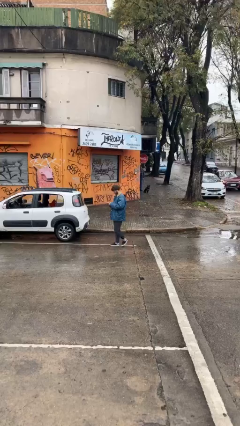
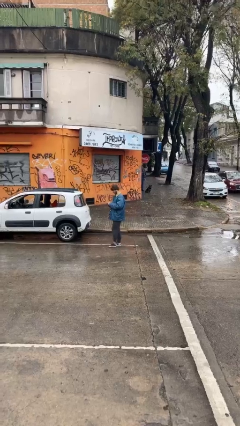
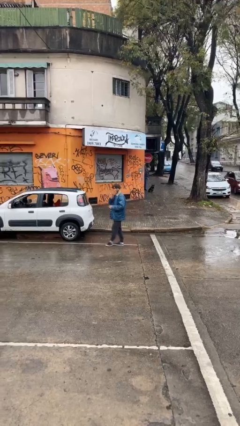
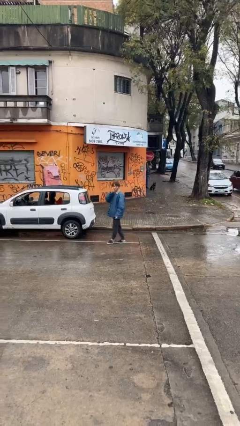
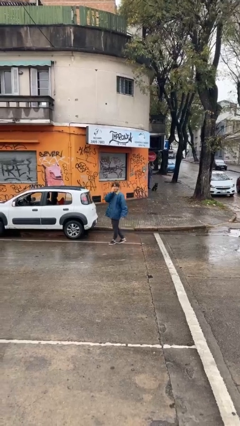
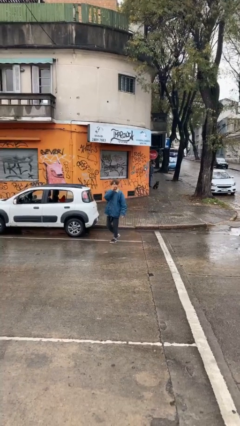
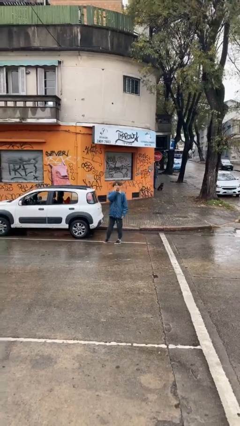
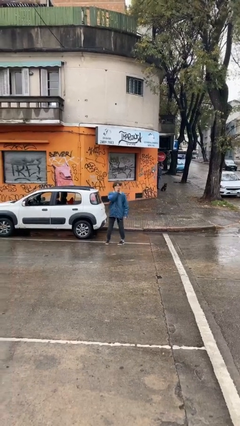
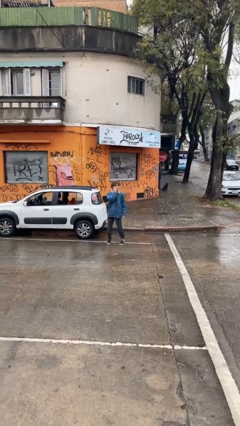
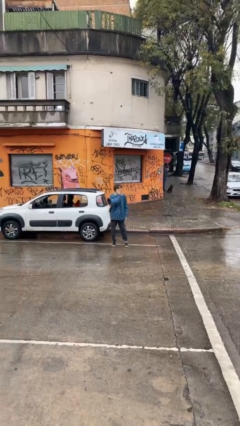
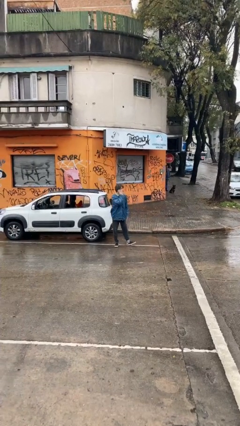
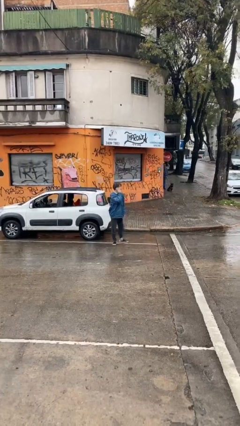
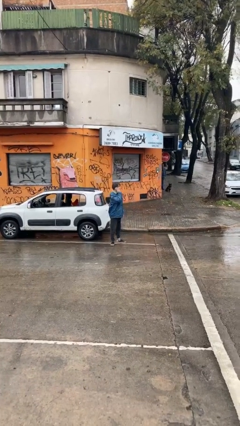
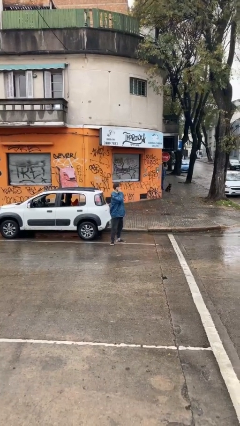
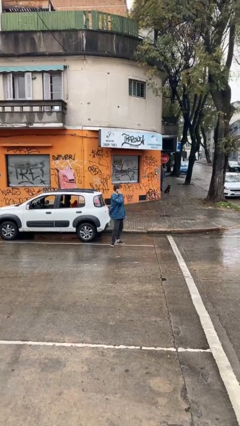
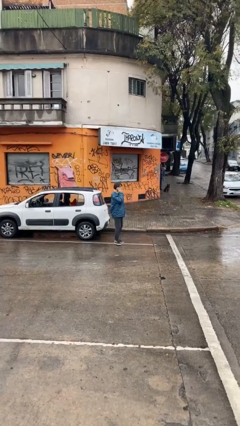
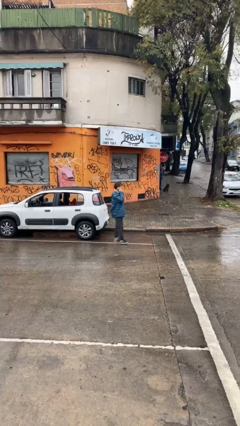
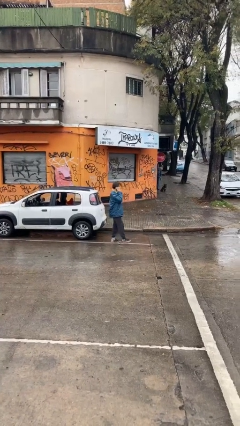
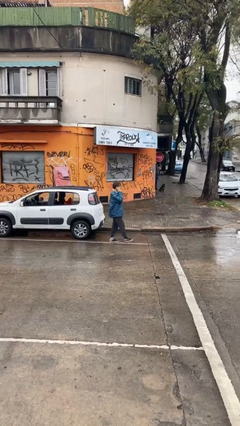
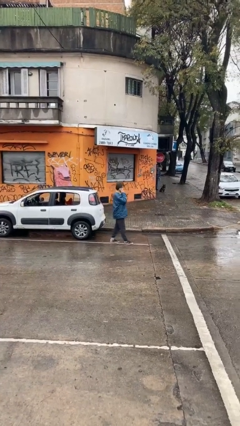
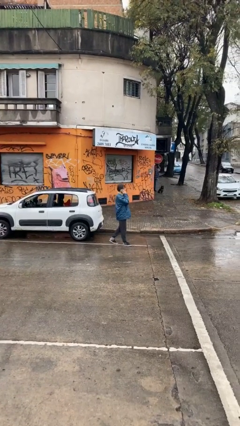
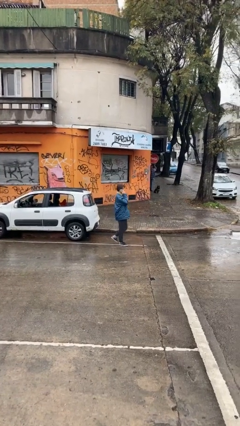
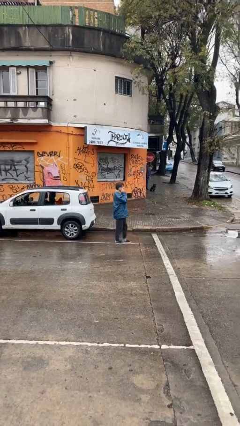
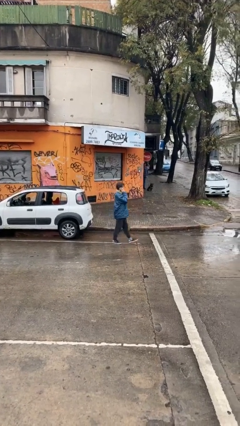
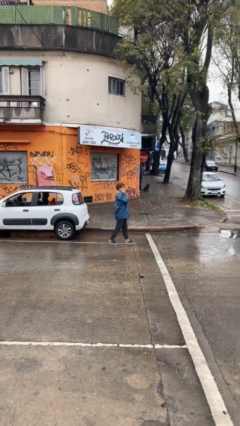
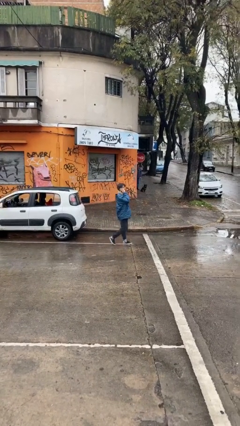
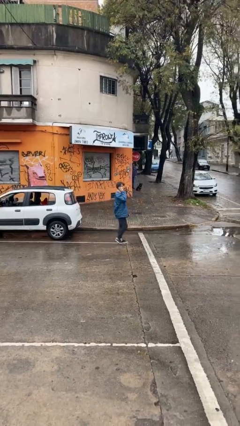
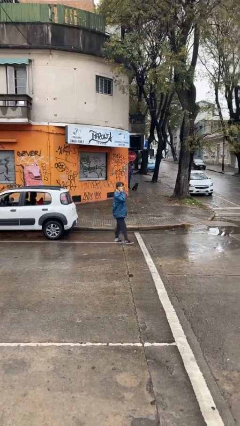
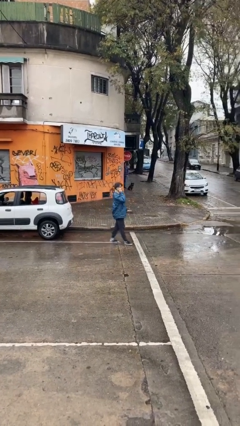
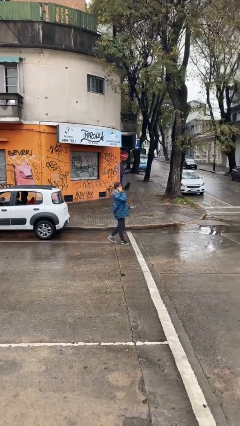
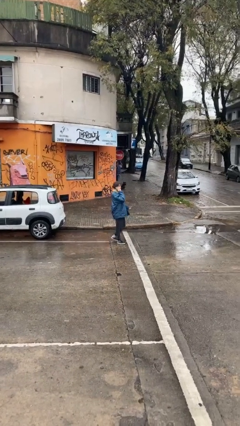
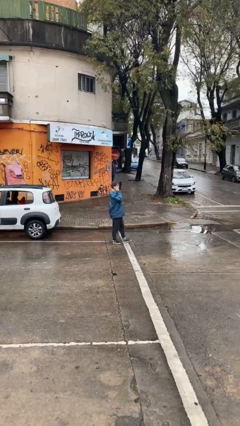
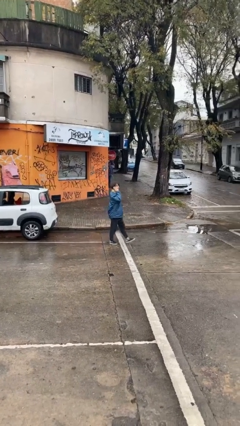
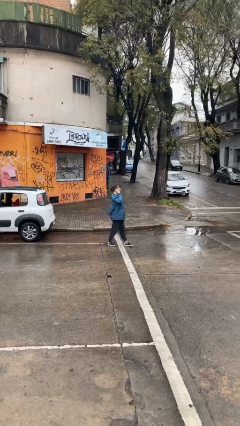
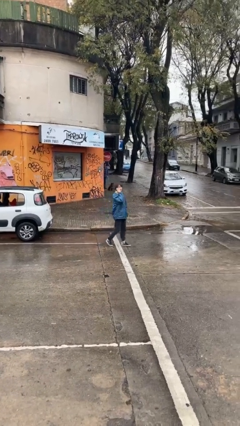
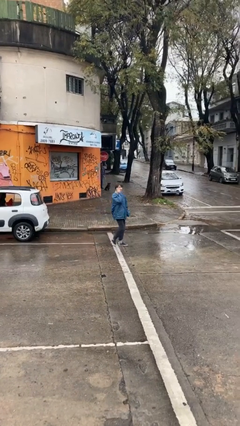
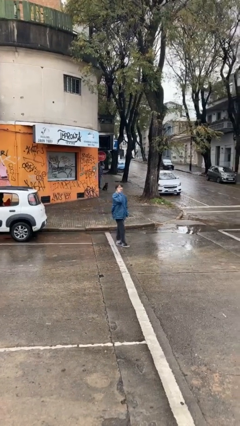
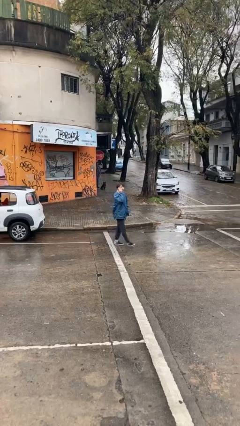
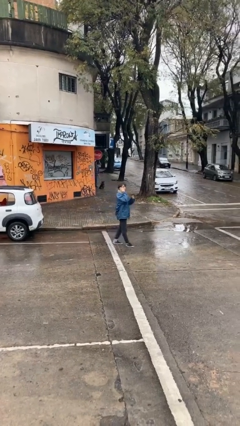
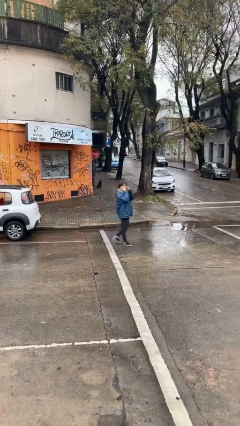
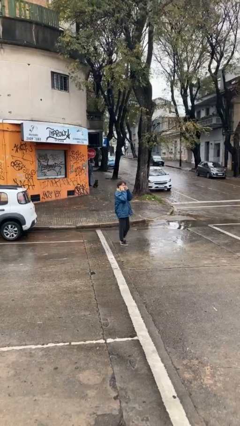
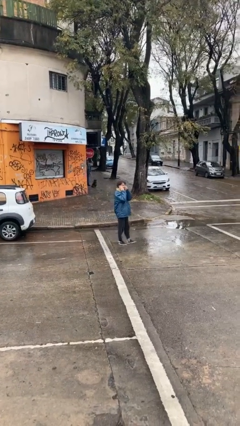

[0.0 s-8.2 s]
person talks on phone

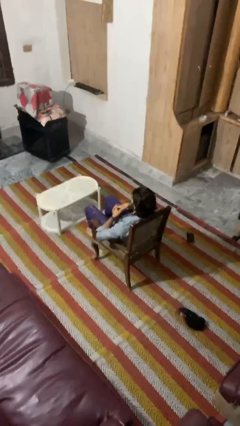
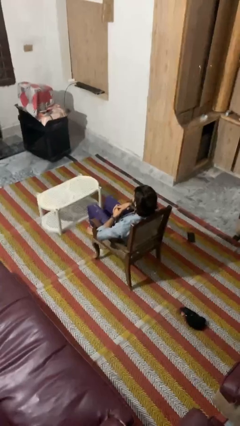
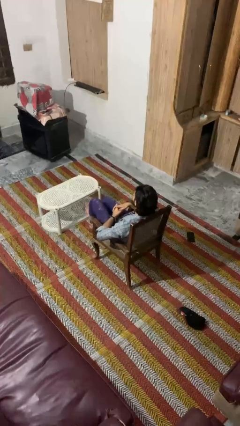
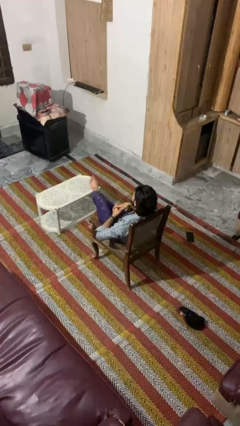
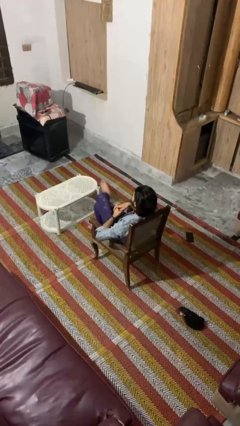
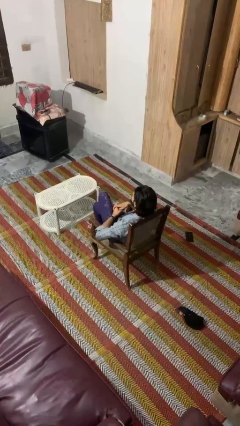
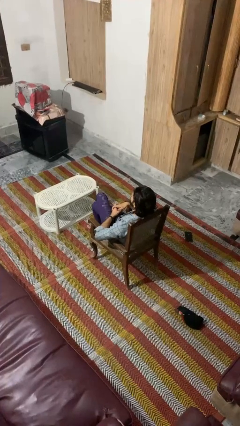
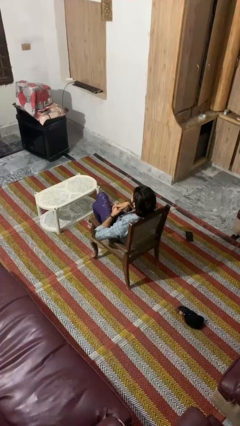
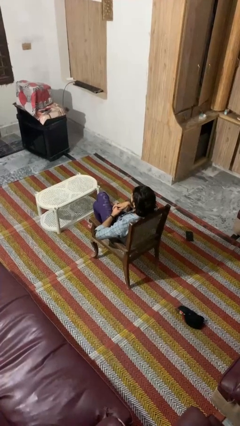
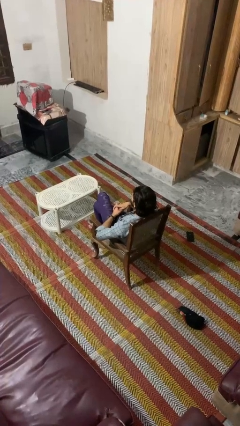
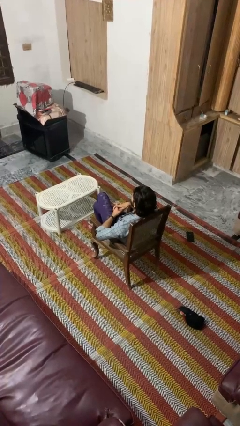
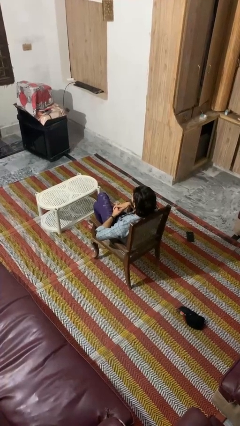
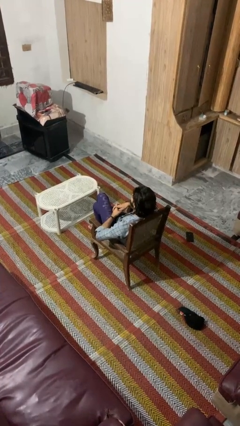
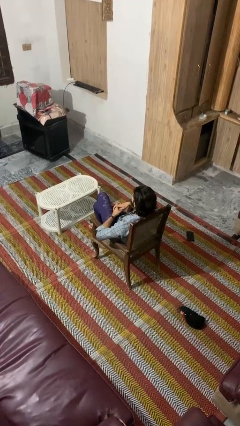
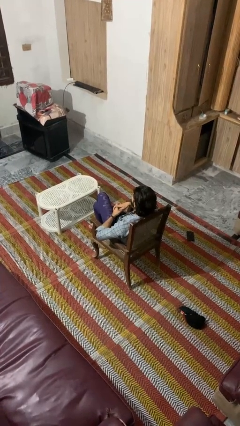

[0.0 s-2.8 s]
person crosses legs

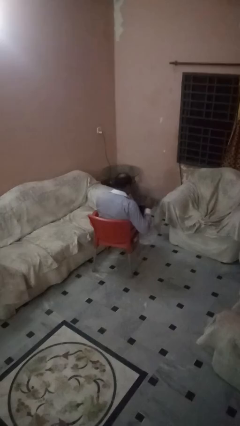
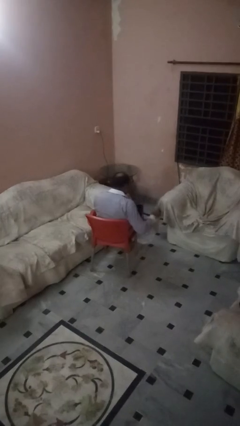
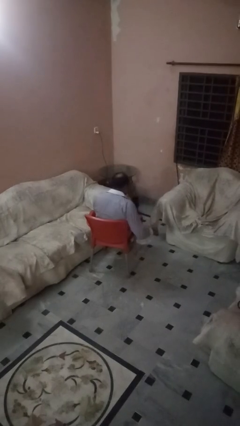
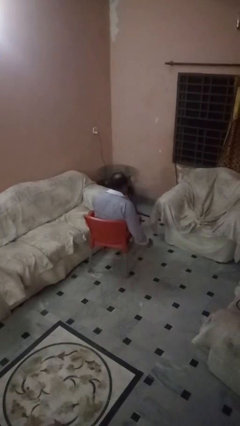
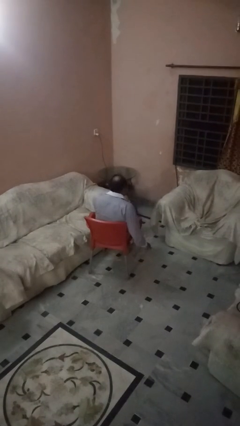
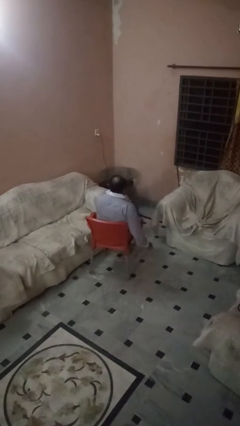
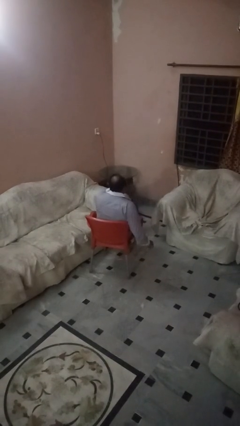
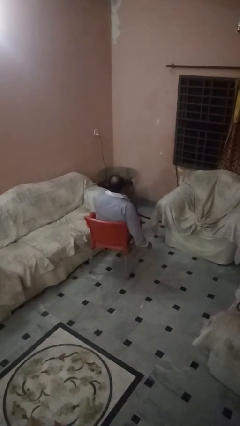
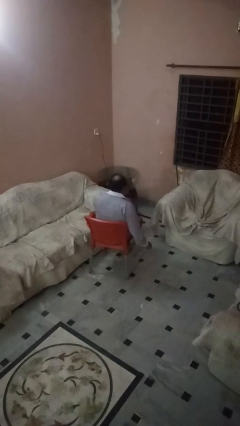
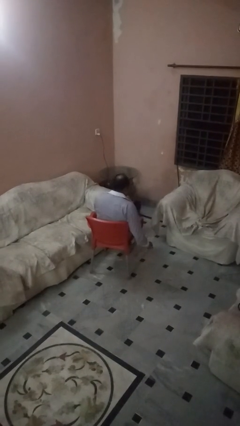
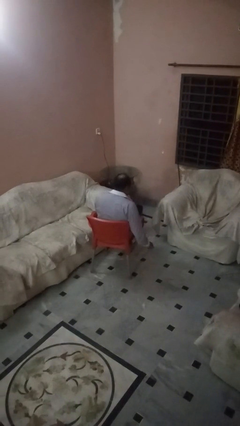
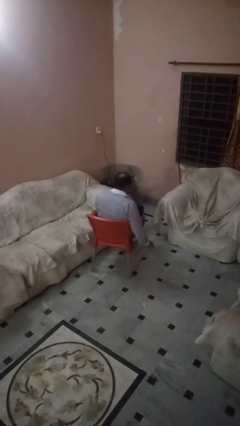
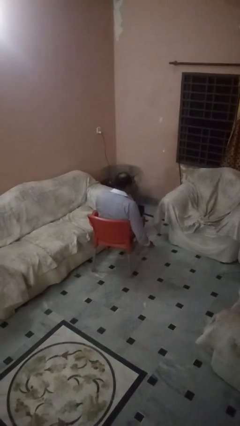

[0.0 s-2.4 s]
person drinks from mug

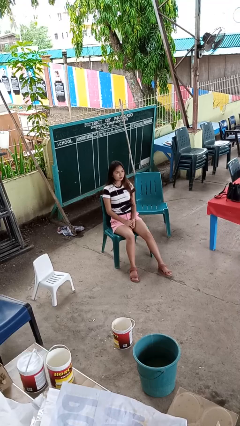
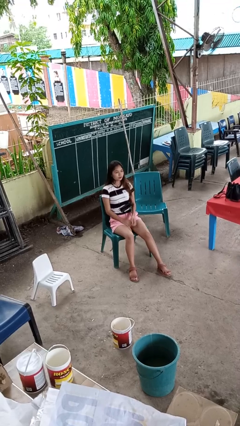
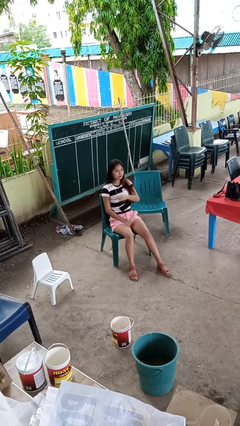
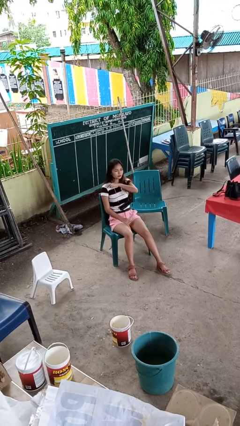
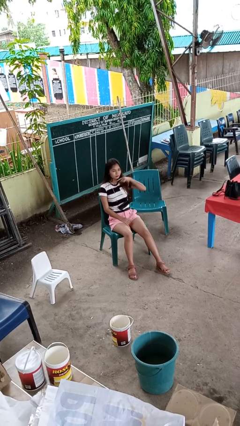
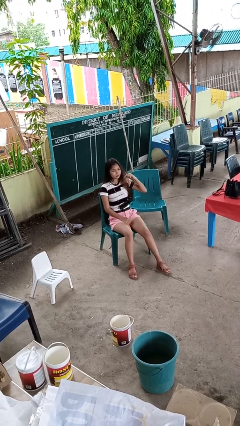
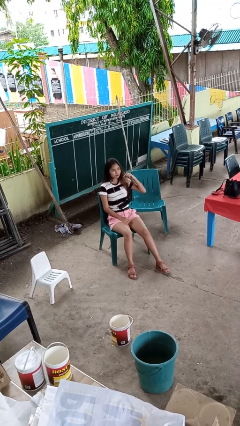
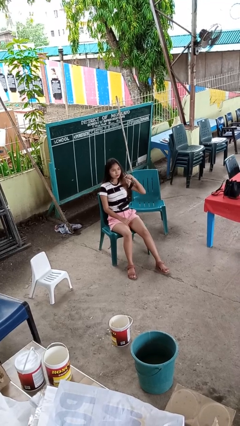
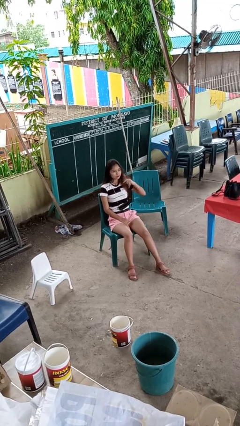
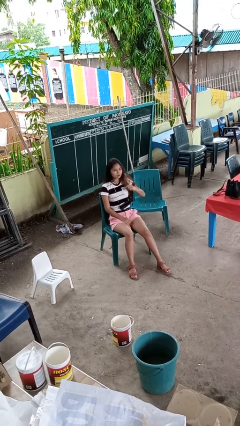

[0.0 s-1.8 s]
person gestures cut

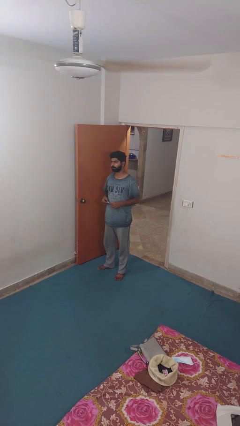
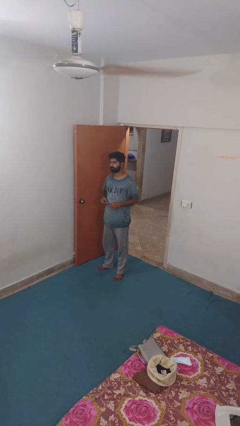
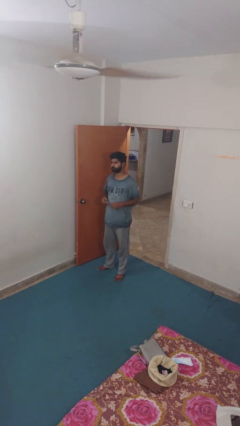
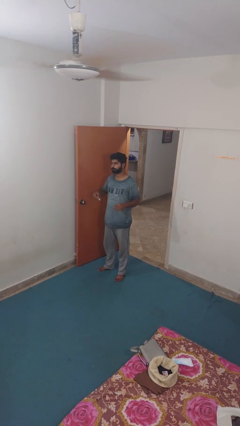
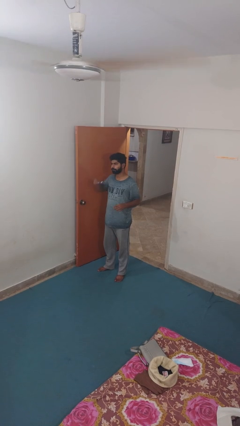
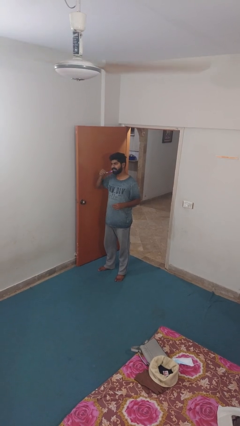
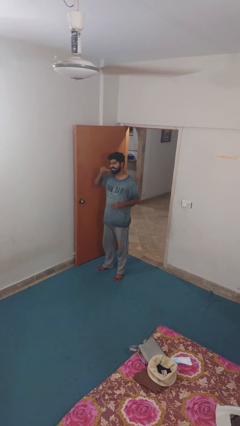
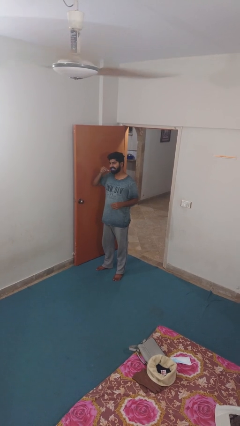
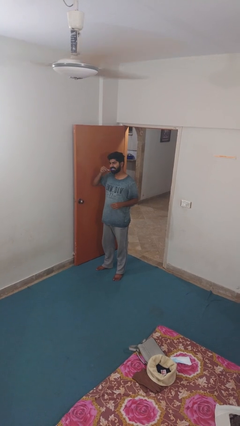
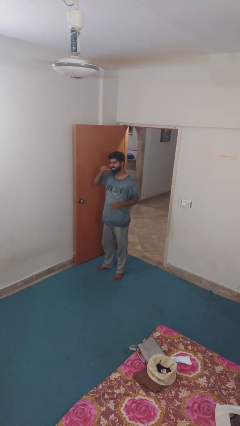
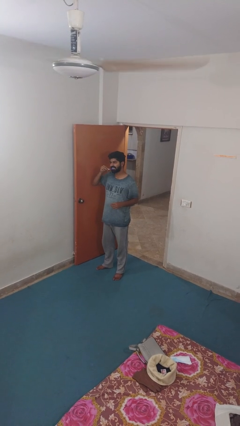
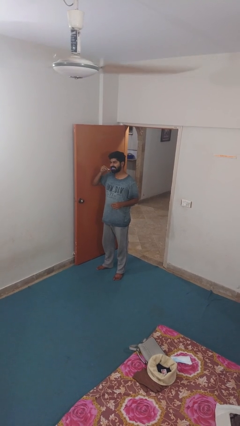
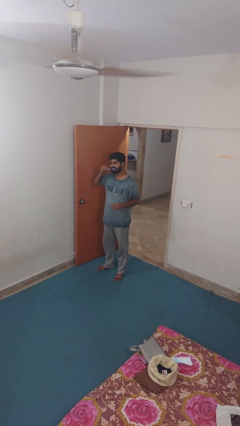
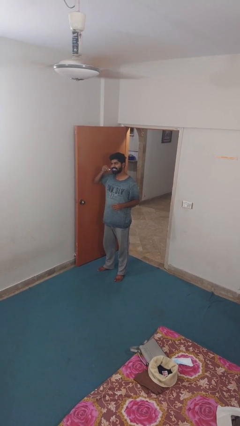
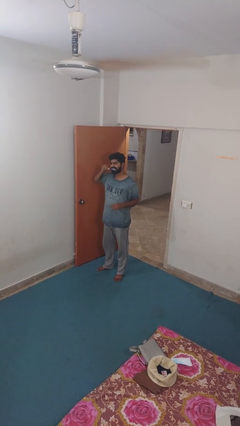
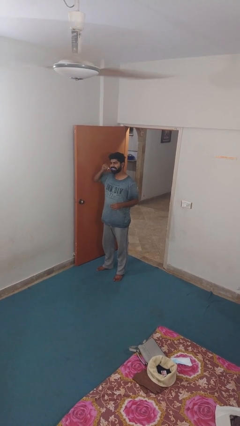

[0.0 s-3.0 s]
person brushes teeth
